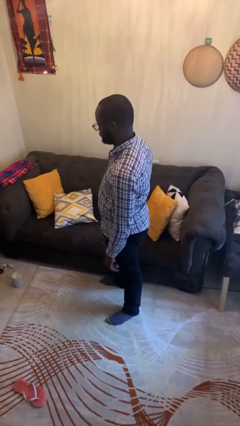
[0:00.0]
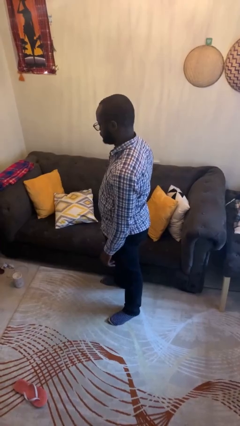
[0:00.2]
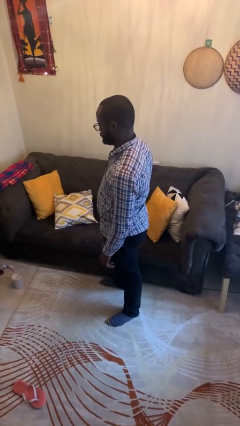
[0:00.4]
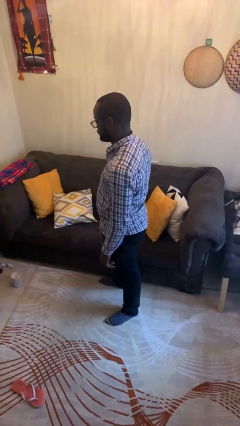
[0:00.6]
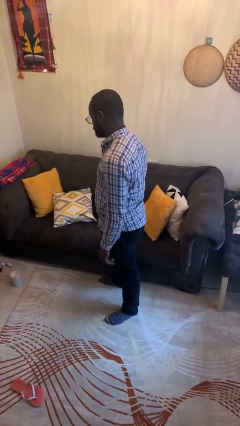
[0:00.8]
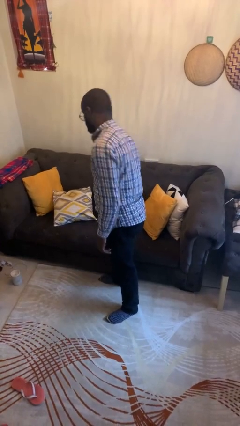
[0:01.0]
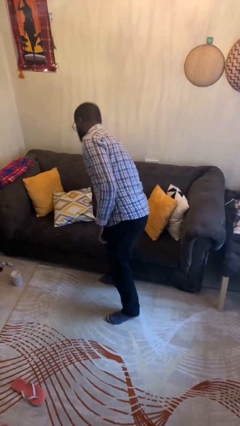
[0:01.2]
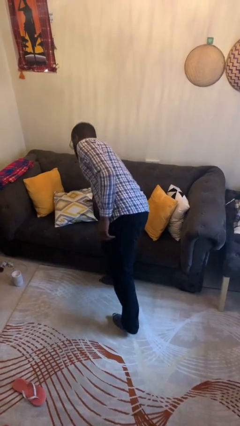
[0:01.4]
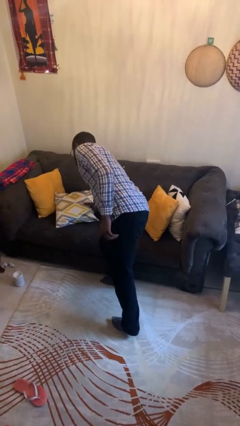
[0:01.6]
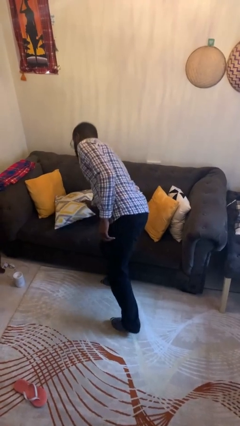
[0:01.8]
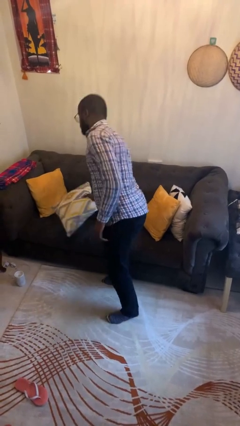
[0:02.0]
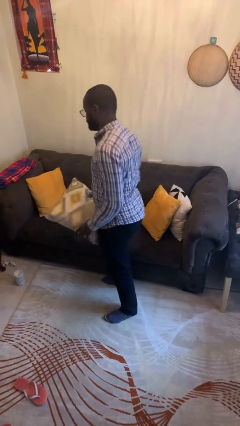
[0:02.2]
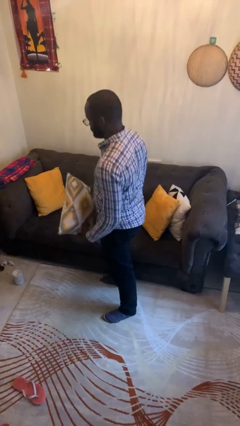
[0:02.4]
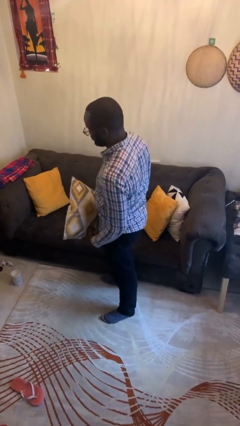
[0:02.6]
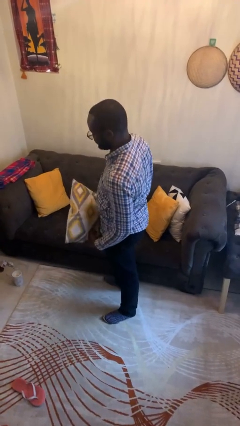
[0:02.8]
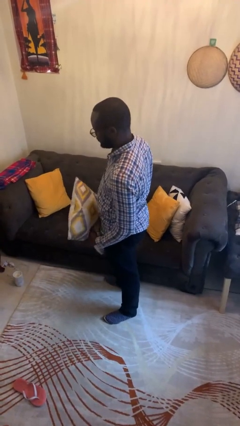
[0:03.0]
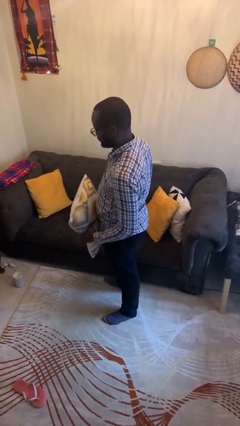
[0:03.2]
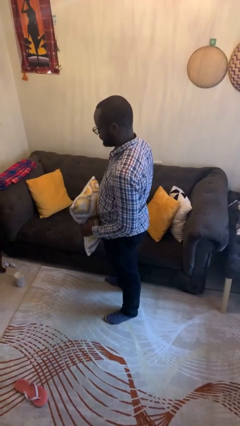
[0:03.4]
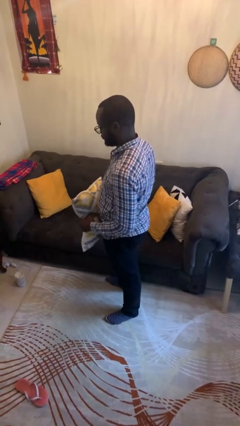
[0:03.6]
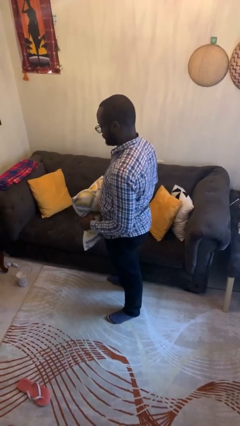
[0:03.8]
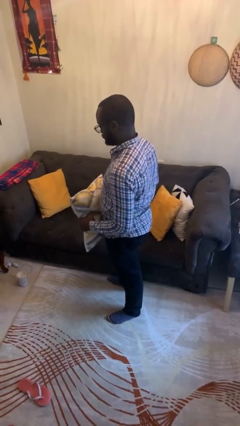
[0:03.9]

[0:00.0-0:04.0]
person picks up object from couch

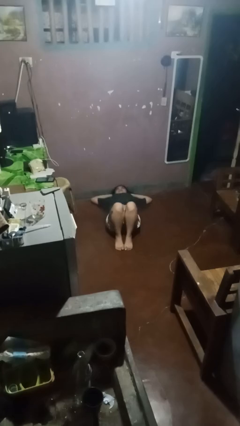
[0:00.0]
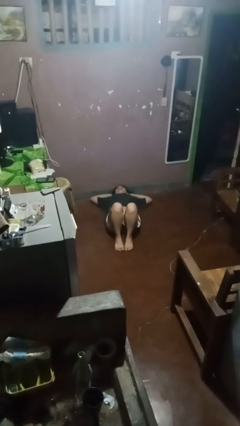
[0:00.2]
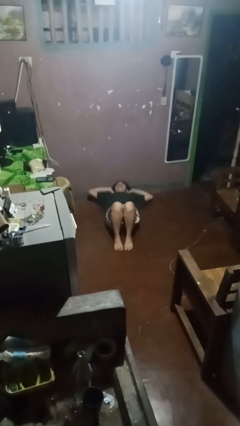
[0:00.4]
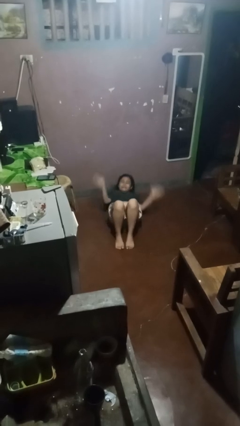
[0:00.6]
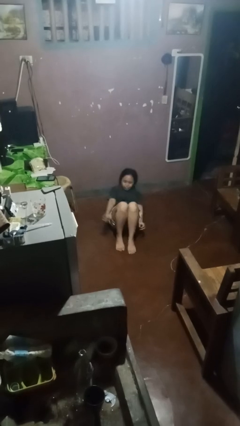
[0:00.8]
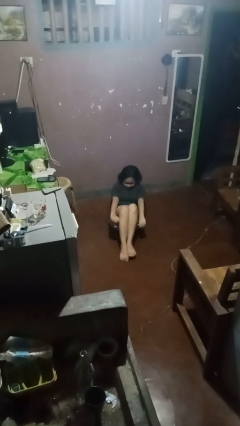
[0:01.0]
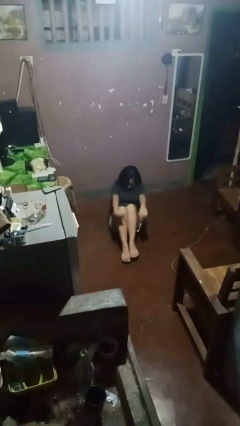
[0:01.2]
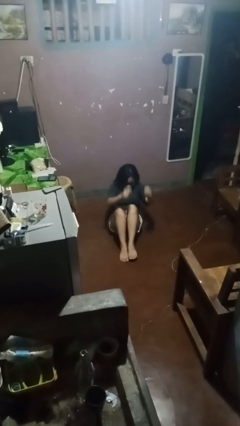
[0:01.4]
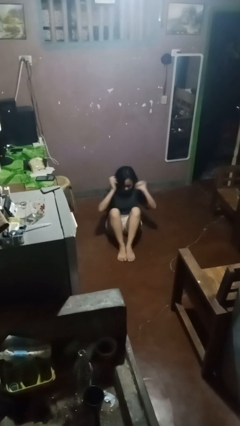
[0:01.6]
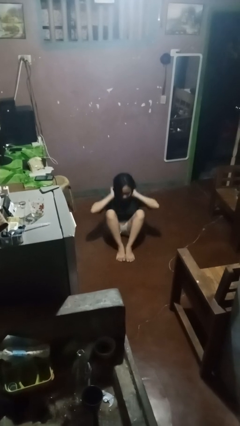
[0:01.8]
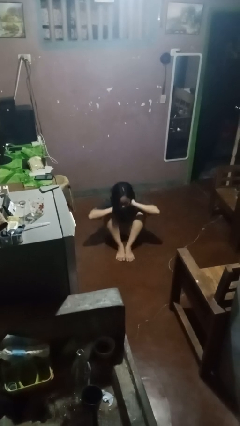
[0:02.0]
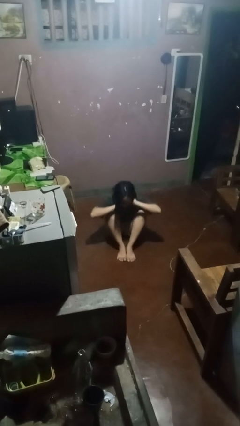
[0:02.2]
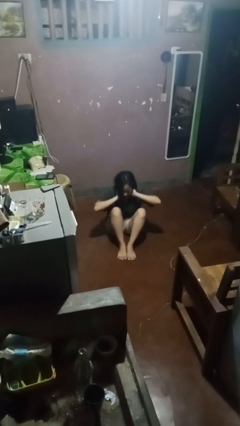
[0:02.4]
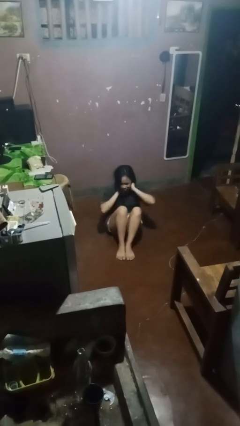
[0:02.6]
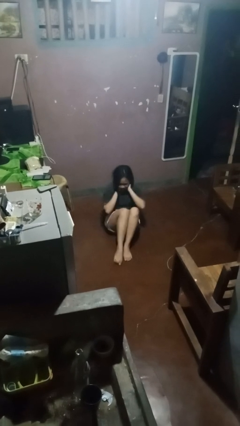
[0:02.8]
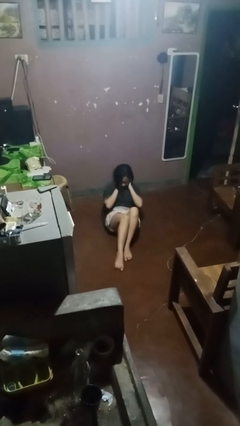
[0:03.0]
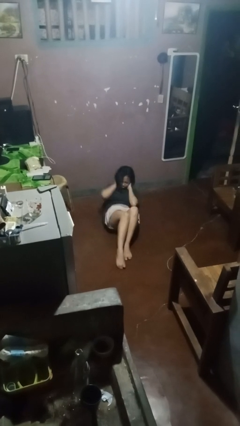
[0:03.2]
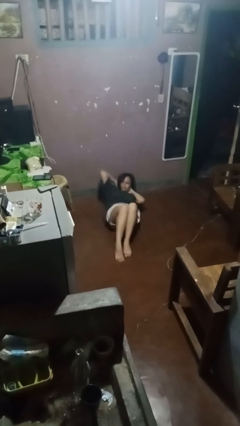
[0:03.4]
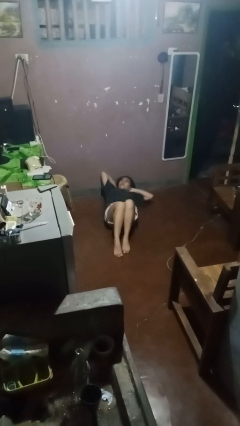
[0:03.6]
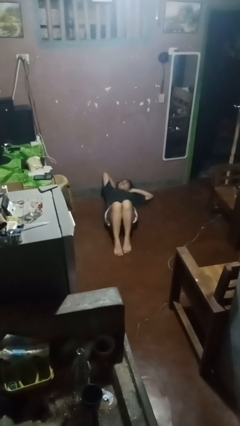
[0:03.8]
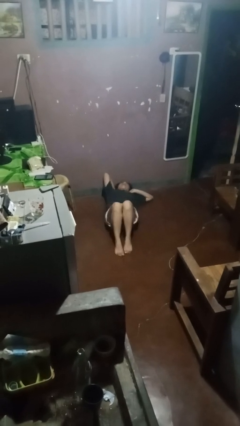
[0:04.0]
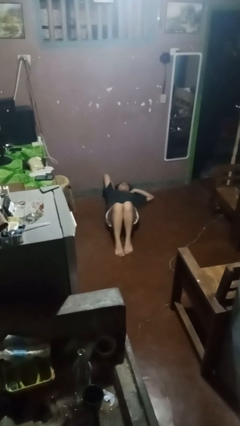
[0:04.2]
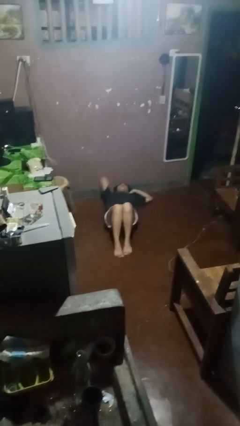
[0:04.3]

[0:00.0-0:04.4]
person exercises with situp

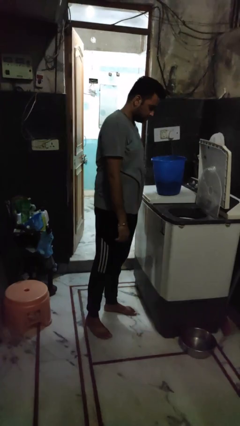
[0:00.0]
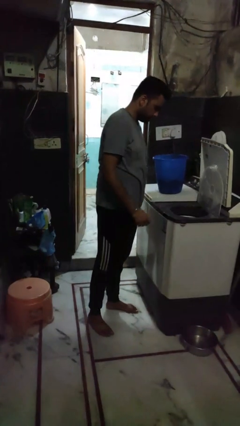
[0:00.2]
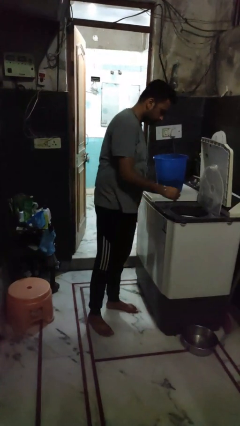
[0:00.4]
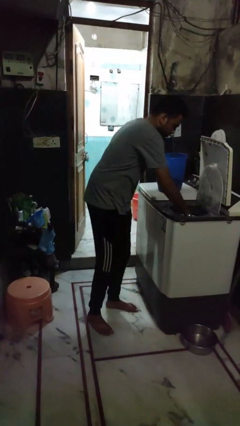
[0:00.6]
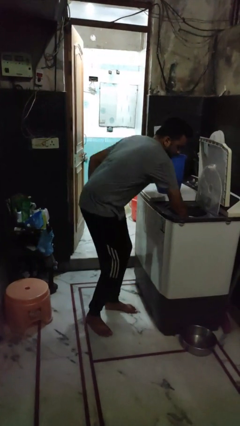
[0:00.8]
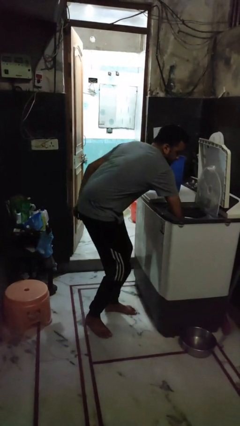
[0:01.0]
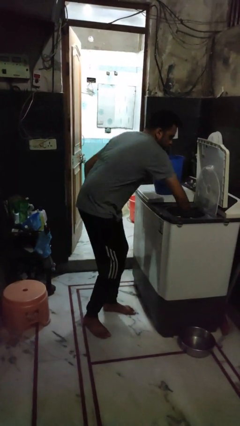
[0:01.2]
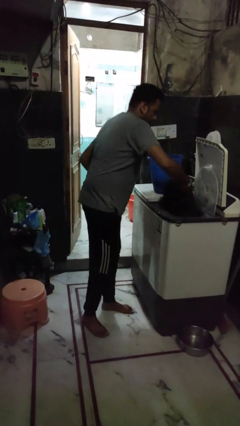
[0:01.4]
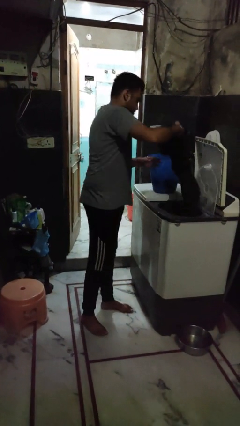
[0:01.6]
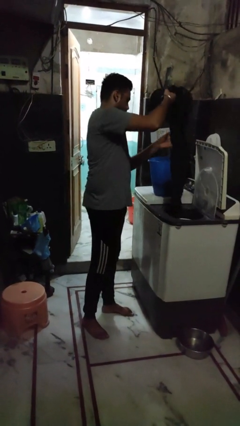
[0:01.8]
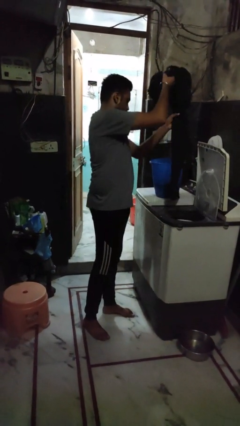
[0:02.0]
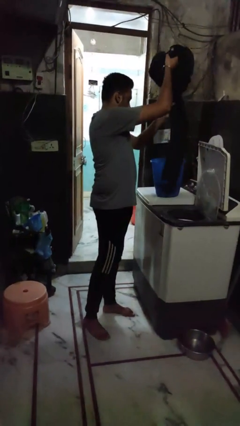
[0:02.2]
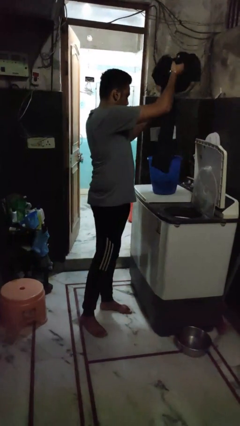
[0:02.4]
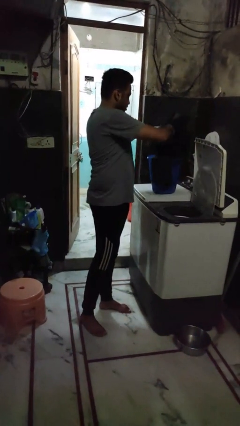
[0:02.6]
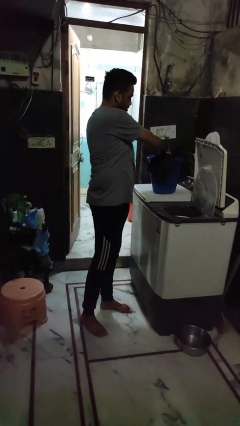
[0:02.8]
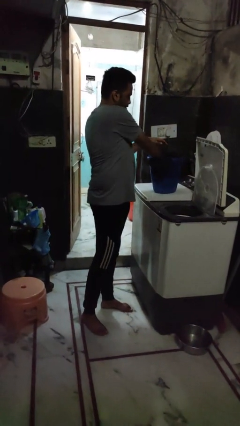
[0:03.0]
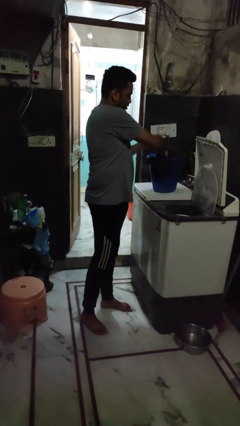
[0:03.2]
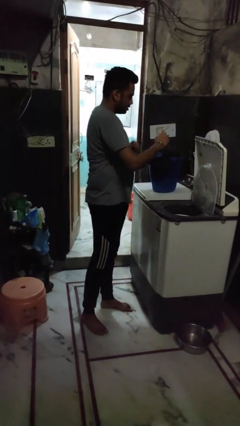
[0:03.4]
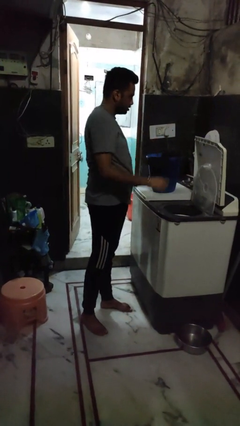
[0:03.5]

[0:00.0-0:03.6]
person unloads dryer

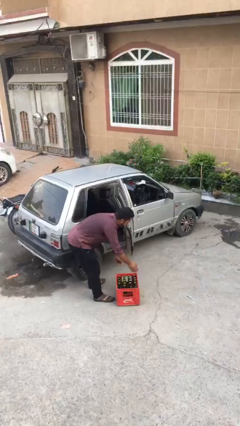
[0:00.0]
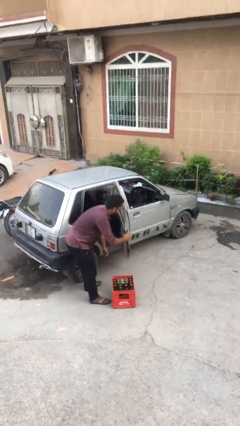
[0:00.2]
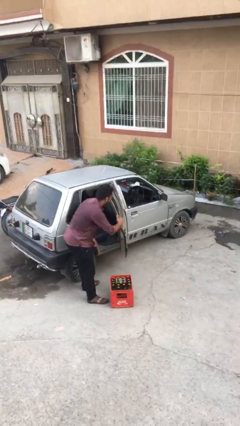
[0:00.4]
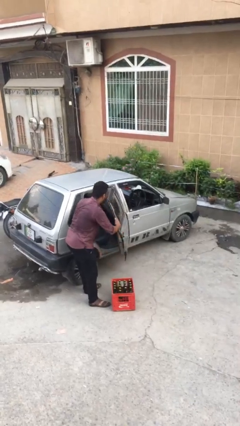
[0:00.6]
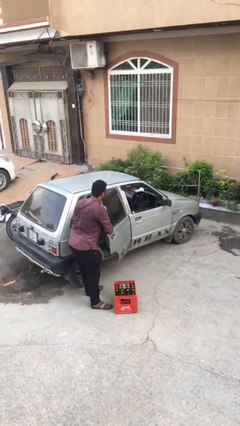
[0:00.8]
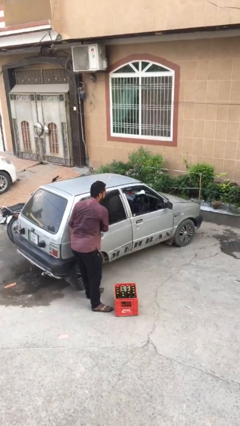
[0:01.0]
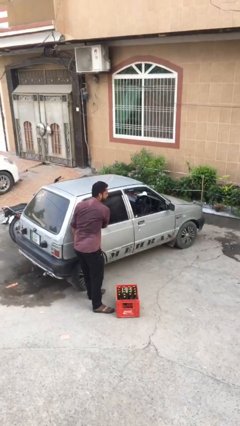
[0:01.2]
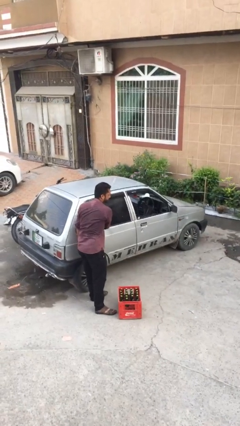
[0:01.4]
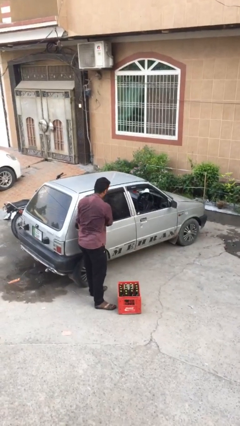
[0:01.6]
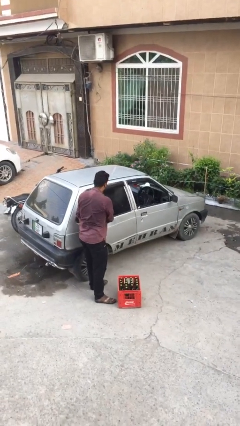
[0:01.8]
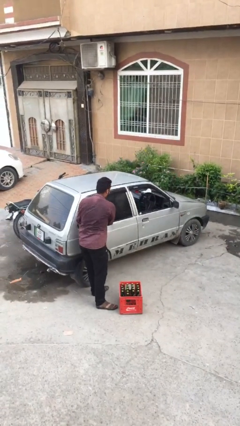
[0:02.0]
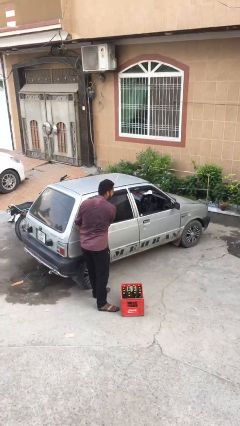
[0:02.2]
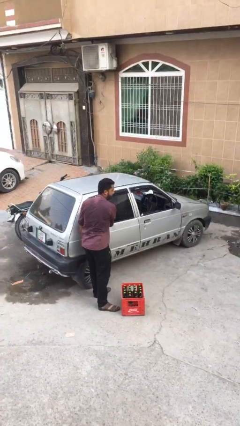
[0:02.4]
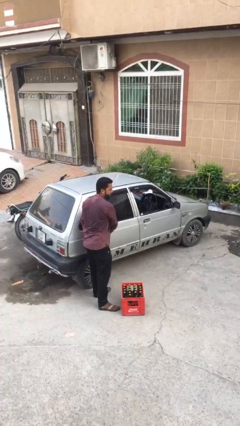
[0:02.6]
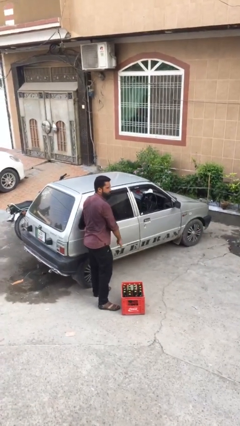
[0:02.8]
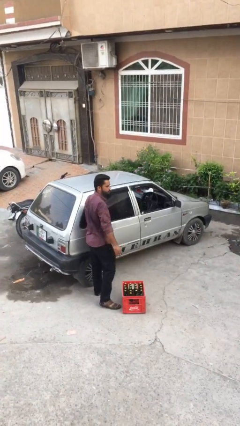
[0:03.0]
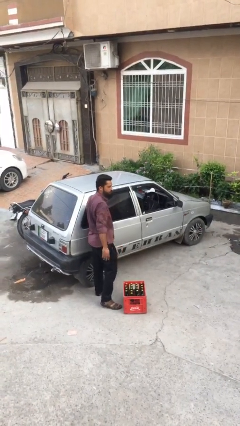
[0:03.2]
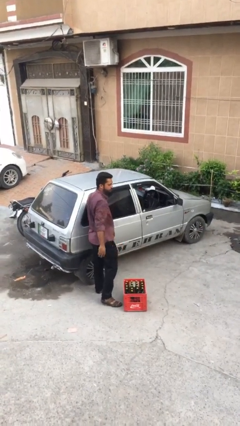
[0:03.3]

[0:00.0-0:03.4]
person closes car door

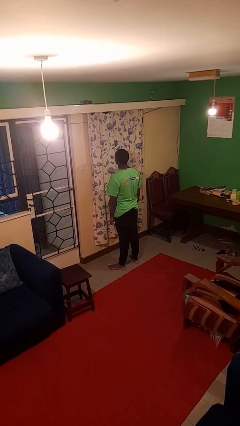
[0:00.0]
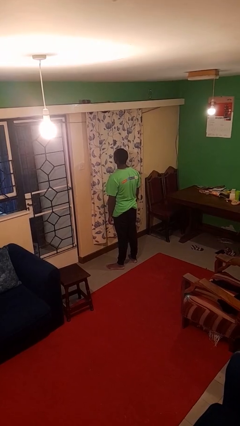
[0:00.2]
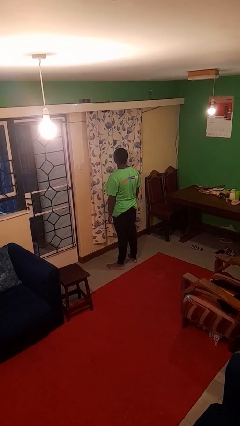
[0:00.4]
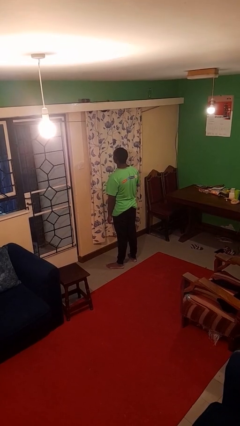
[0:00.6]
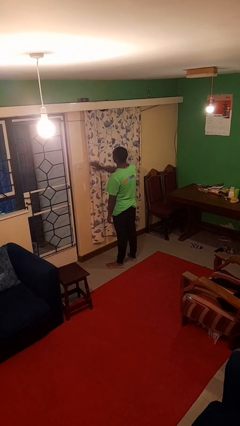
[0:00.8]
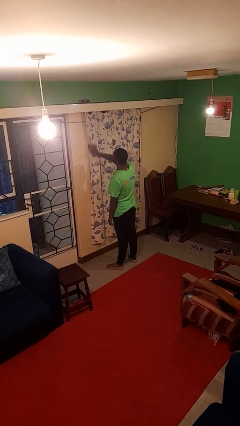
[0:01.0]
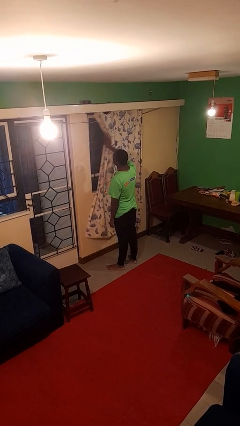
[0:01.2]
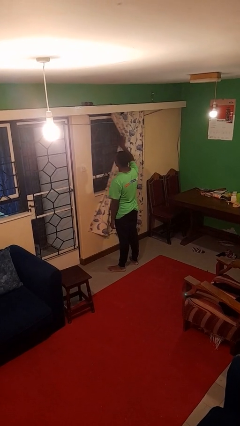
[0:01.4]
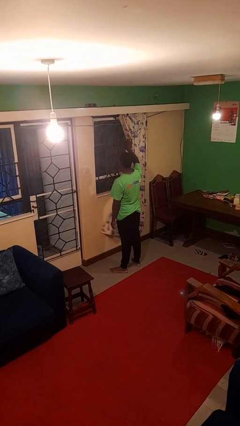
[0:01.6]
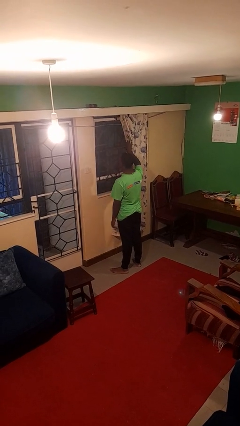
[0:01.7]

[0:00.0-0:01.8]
person opens curtains
